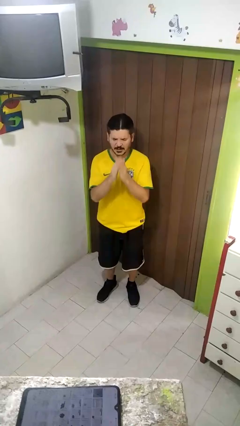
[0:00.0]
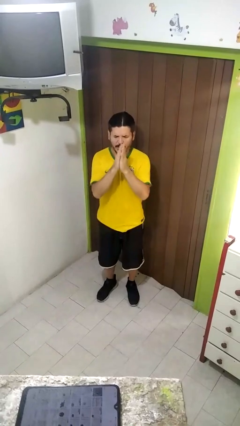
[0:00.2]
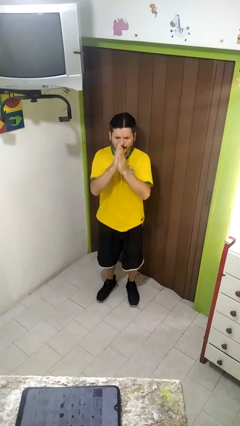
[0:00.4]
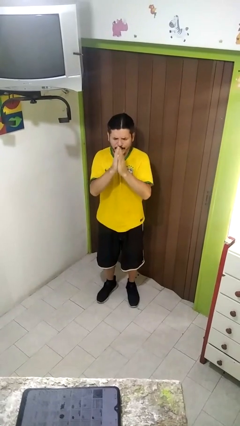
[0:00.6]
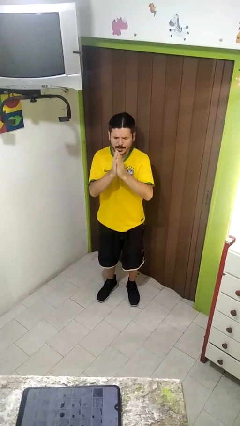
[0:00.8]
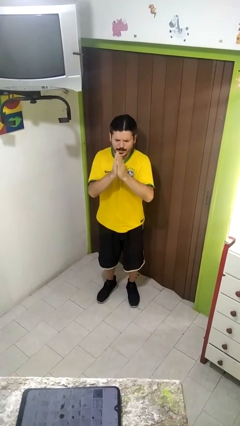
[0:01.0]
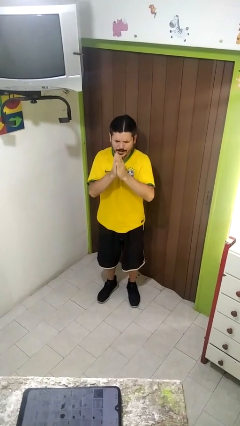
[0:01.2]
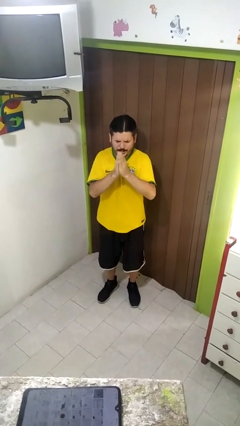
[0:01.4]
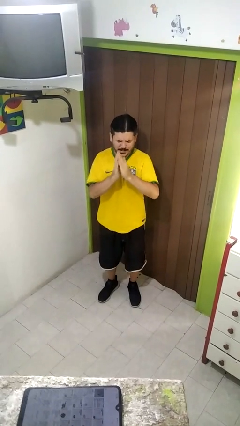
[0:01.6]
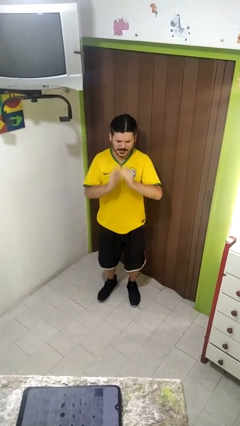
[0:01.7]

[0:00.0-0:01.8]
person blows into hands

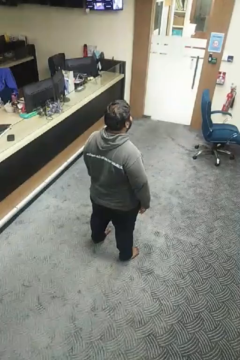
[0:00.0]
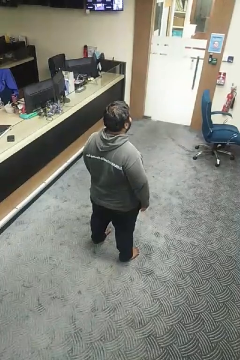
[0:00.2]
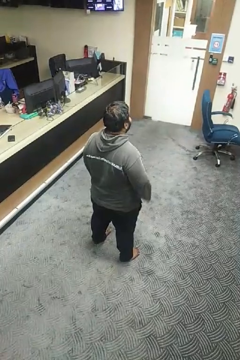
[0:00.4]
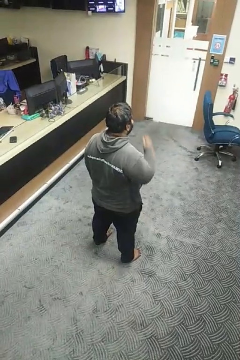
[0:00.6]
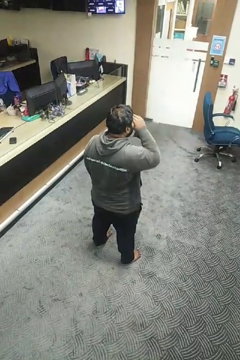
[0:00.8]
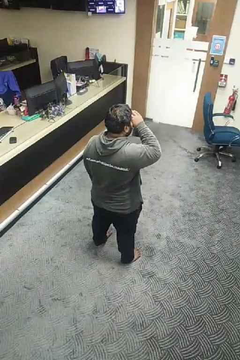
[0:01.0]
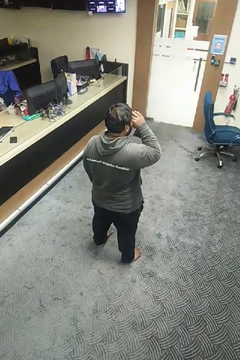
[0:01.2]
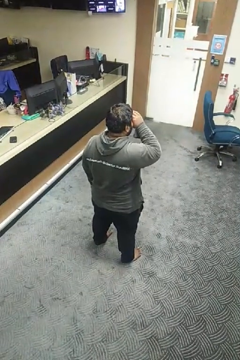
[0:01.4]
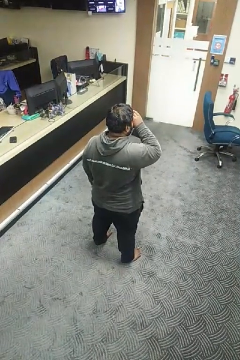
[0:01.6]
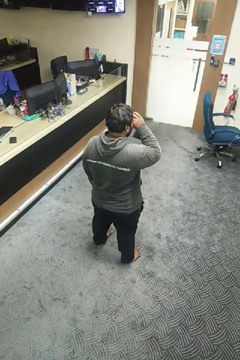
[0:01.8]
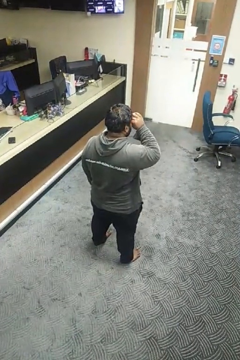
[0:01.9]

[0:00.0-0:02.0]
person rubs eyes

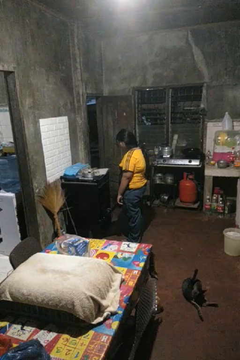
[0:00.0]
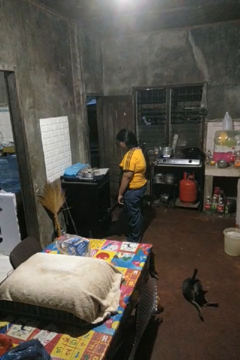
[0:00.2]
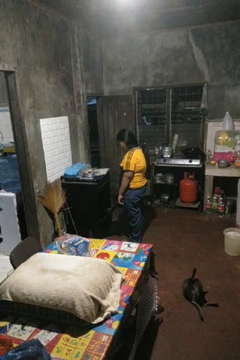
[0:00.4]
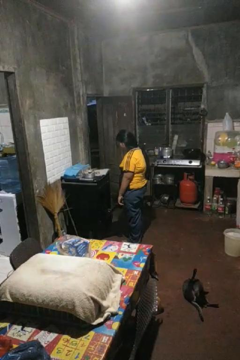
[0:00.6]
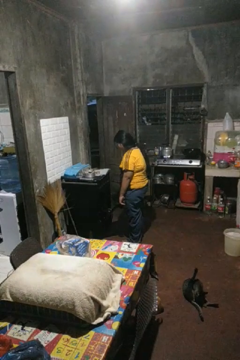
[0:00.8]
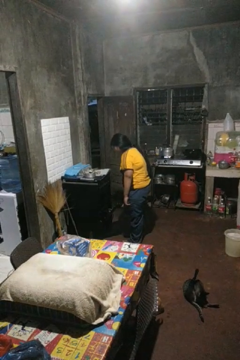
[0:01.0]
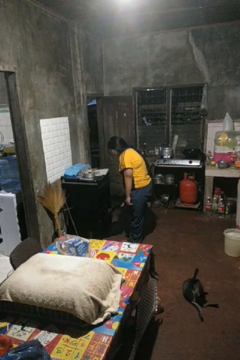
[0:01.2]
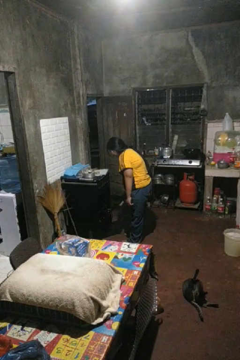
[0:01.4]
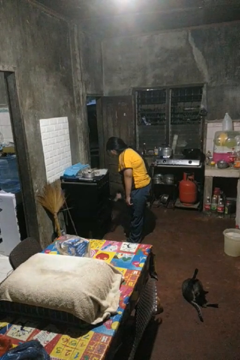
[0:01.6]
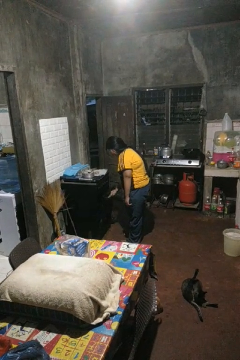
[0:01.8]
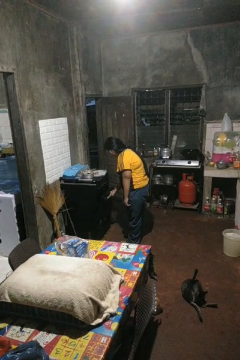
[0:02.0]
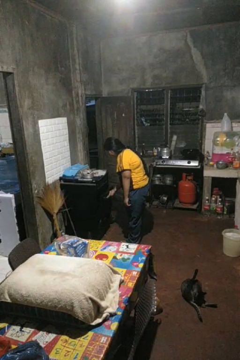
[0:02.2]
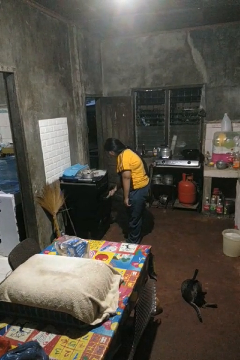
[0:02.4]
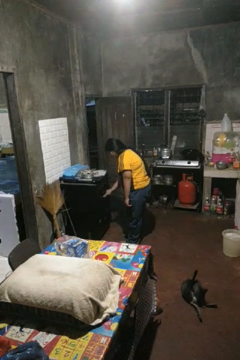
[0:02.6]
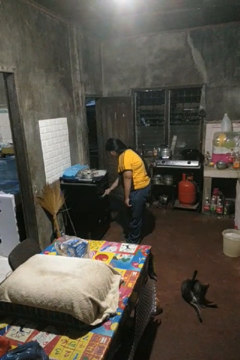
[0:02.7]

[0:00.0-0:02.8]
person closes oven door

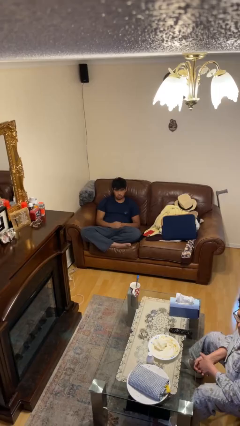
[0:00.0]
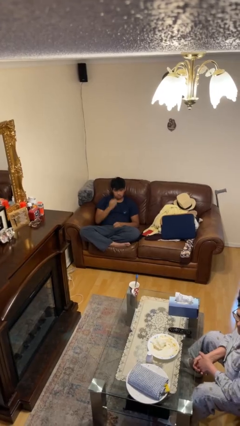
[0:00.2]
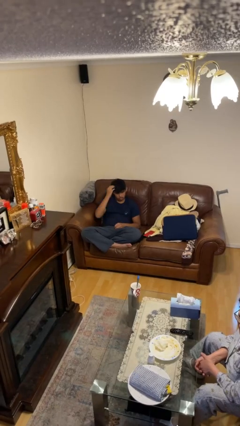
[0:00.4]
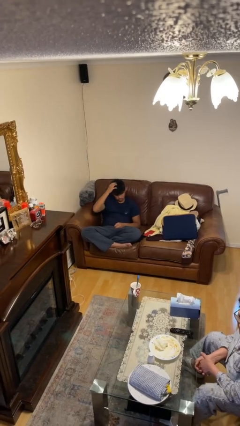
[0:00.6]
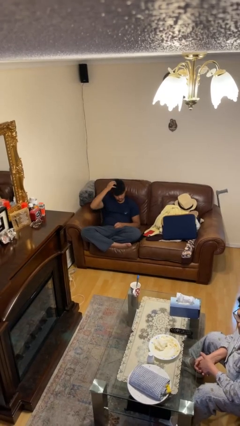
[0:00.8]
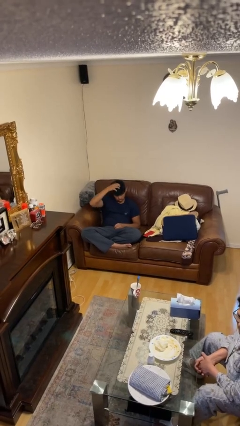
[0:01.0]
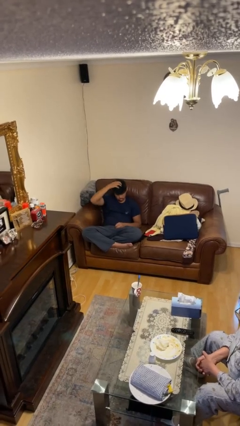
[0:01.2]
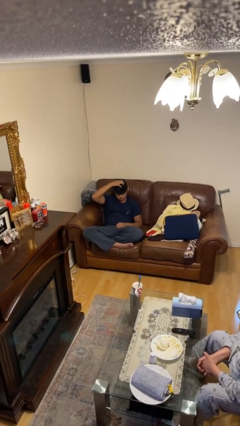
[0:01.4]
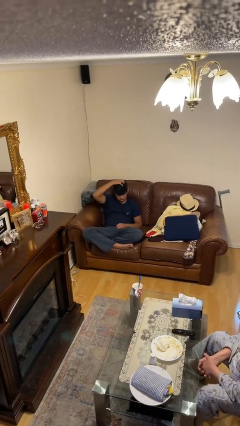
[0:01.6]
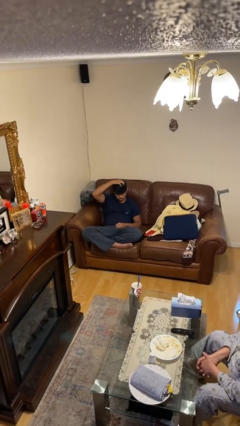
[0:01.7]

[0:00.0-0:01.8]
person strokes hair

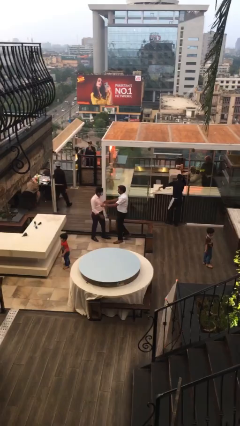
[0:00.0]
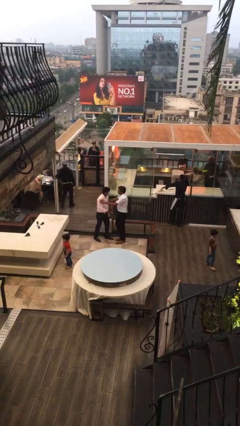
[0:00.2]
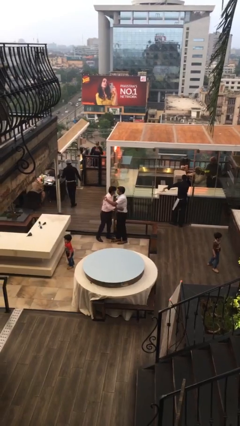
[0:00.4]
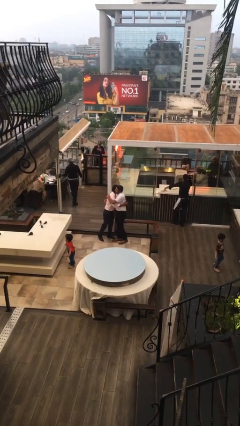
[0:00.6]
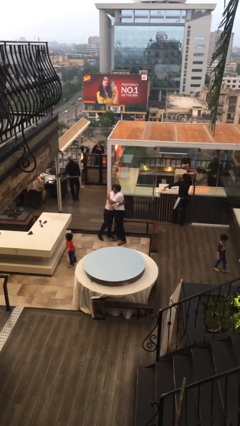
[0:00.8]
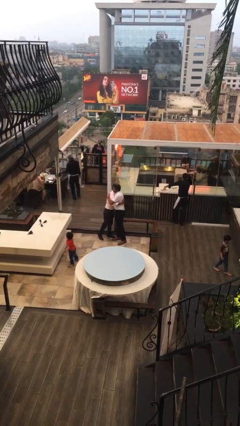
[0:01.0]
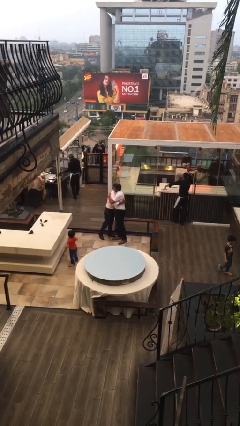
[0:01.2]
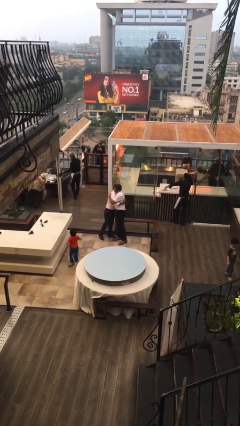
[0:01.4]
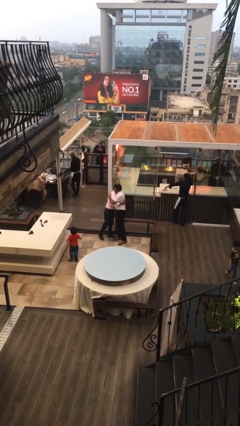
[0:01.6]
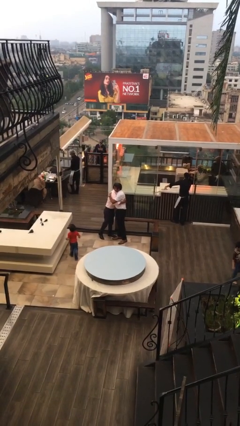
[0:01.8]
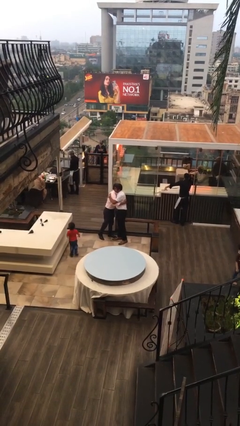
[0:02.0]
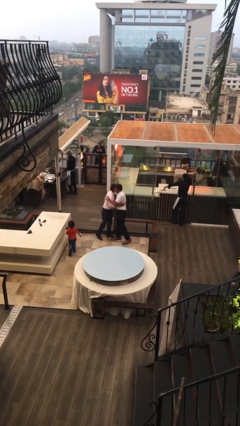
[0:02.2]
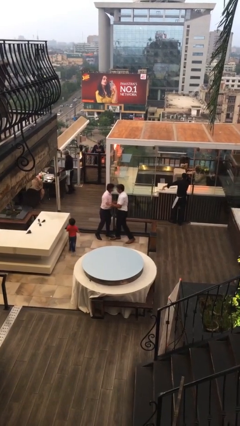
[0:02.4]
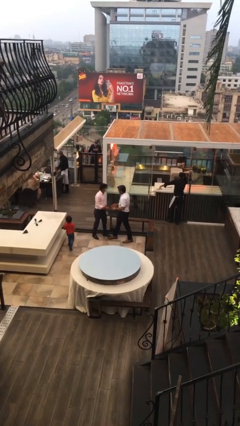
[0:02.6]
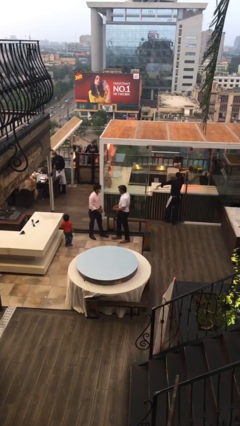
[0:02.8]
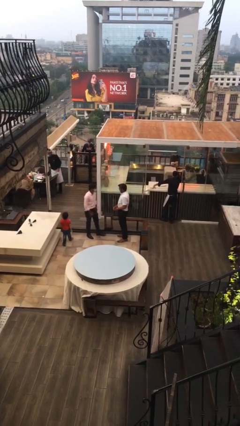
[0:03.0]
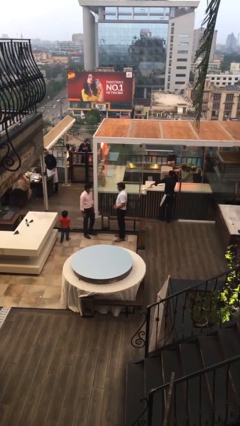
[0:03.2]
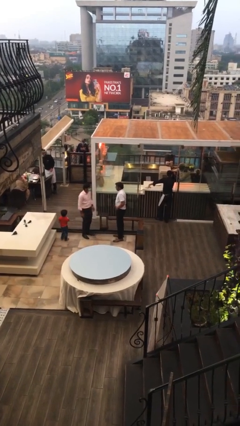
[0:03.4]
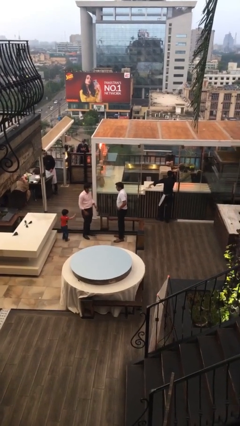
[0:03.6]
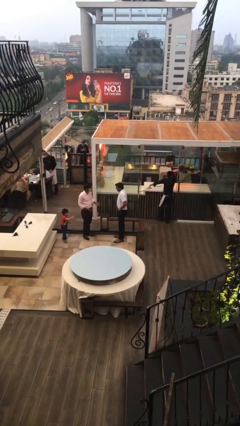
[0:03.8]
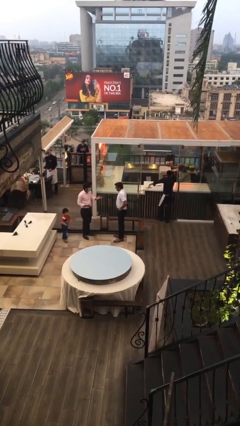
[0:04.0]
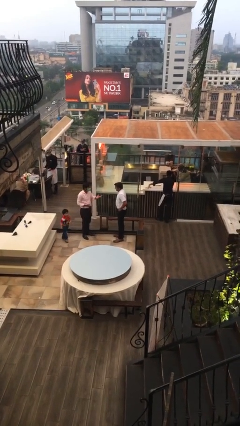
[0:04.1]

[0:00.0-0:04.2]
person embraces person

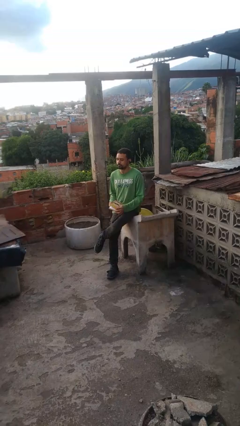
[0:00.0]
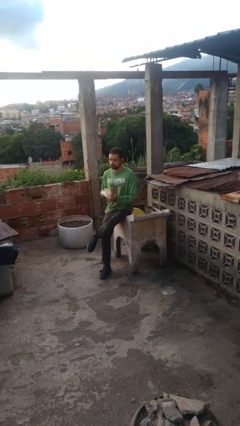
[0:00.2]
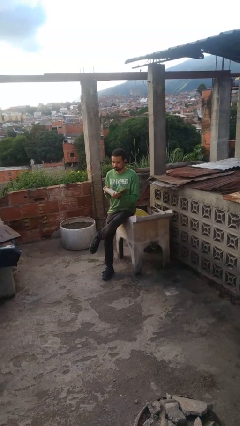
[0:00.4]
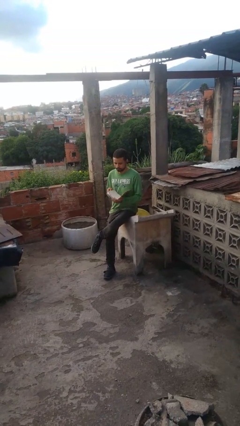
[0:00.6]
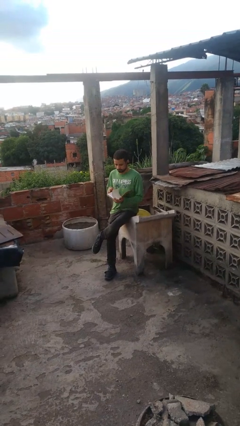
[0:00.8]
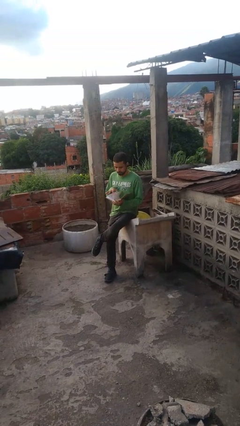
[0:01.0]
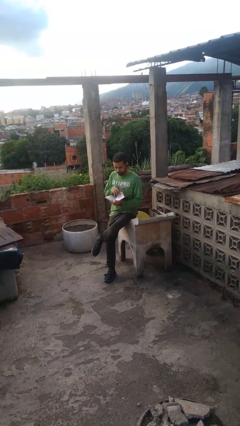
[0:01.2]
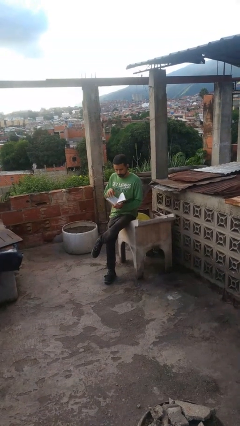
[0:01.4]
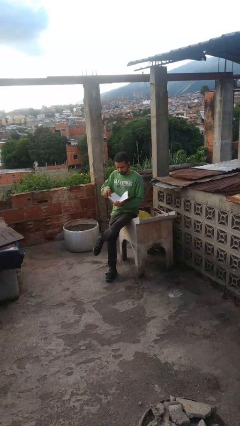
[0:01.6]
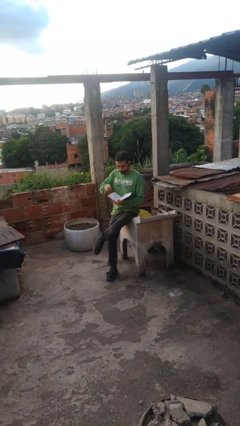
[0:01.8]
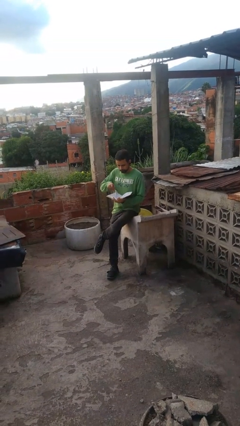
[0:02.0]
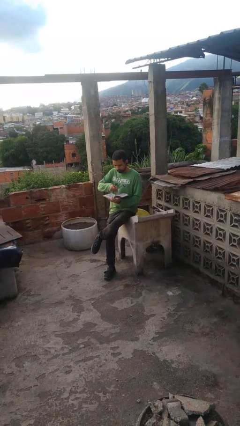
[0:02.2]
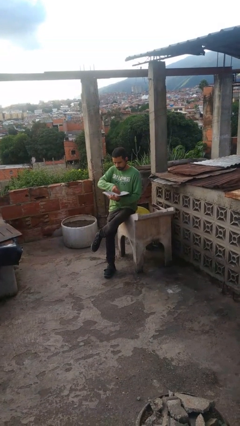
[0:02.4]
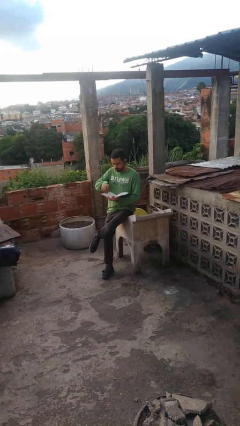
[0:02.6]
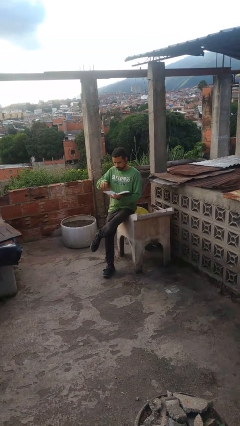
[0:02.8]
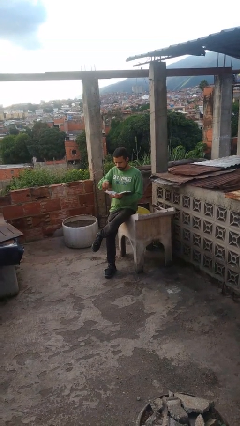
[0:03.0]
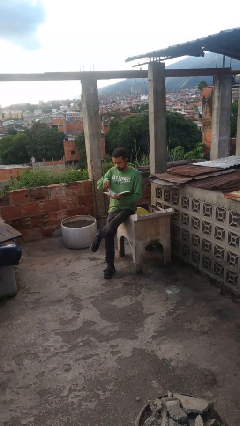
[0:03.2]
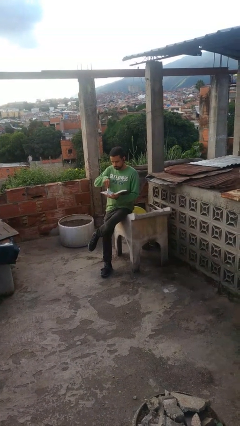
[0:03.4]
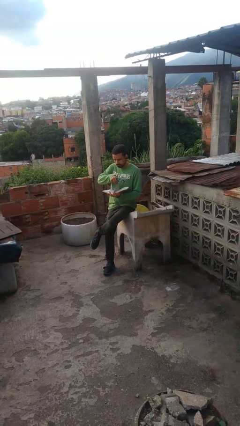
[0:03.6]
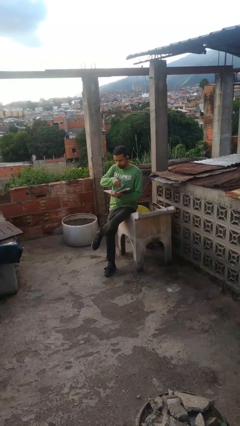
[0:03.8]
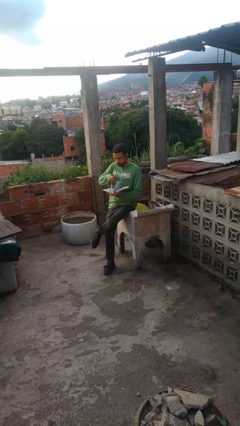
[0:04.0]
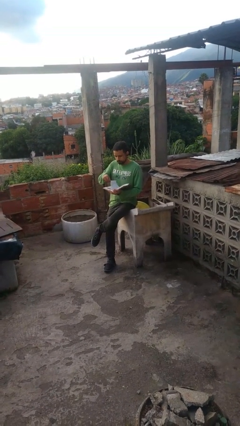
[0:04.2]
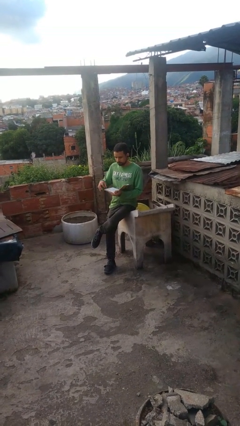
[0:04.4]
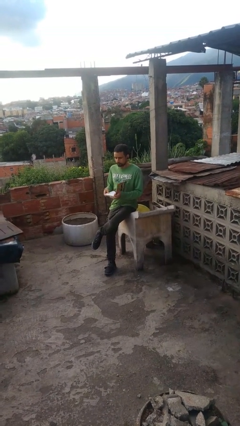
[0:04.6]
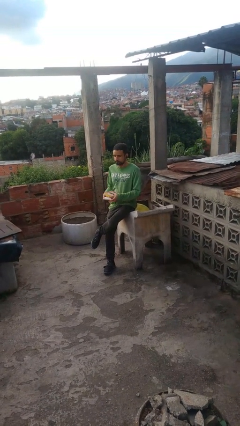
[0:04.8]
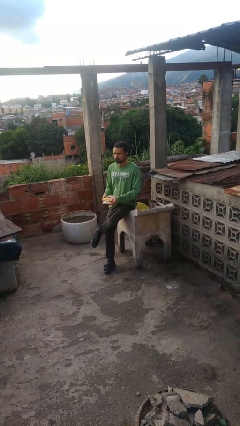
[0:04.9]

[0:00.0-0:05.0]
person reads book

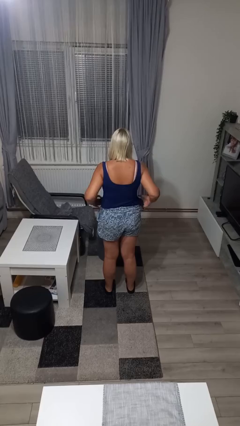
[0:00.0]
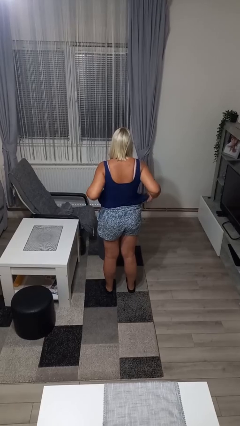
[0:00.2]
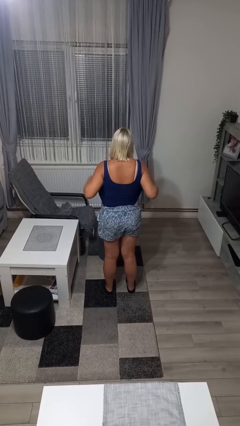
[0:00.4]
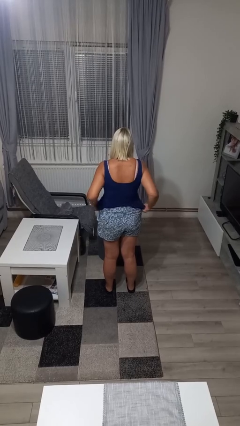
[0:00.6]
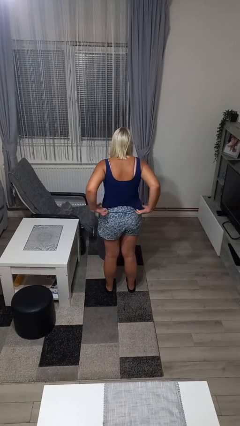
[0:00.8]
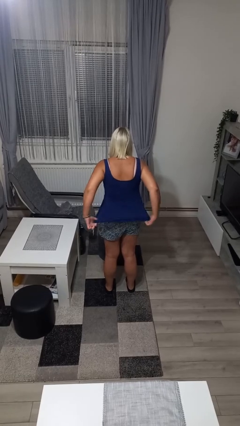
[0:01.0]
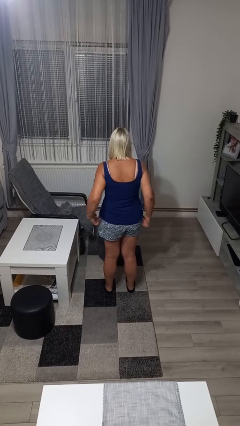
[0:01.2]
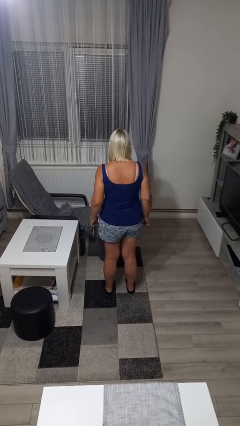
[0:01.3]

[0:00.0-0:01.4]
person untucks shirt
